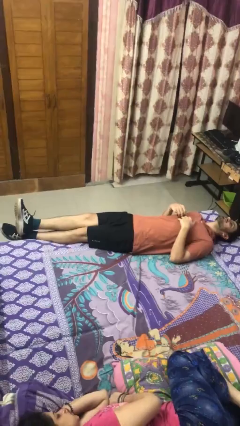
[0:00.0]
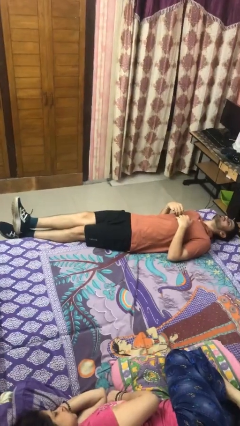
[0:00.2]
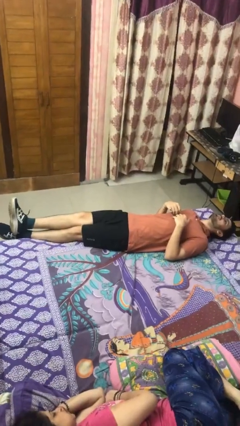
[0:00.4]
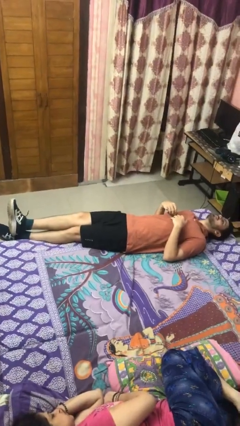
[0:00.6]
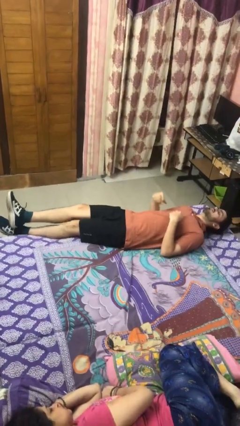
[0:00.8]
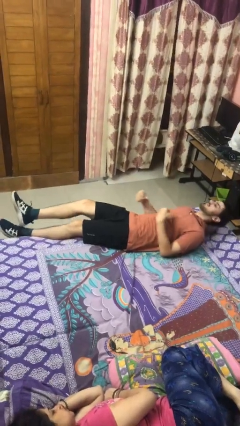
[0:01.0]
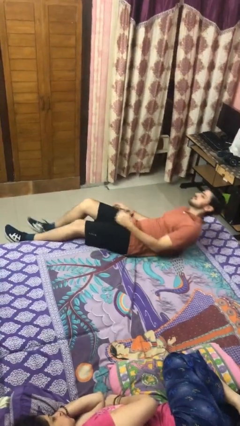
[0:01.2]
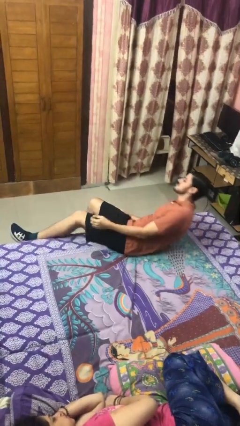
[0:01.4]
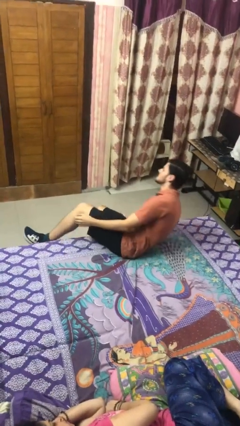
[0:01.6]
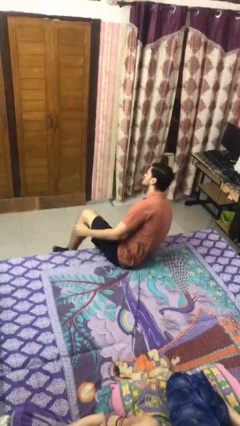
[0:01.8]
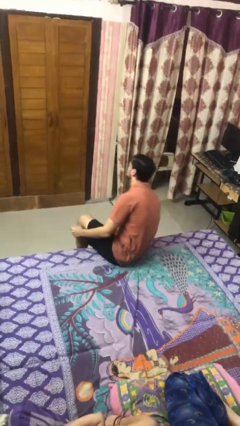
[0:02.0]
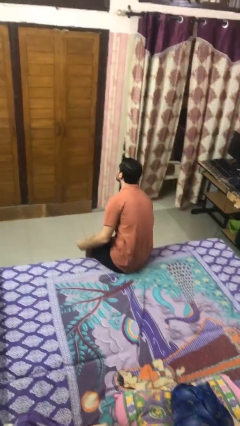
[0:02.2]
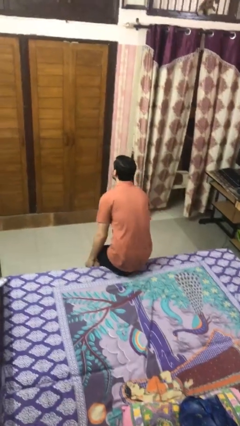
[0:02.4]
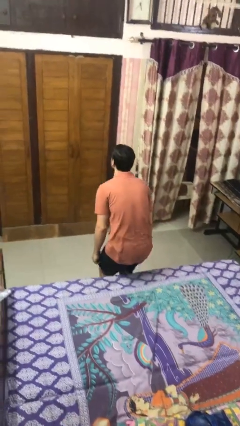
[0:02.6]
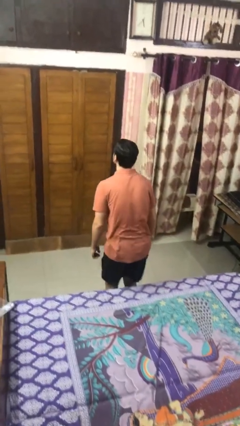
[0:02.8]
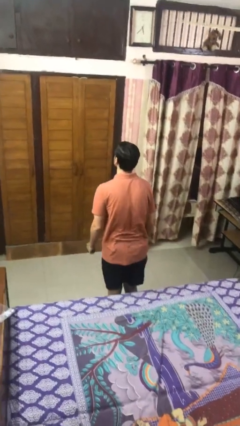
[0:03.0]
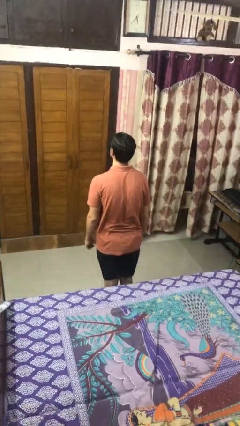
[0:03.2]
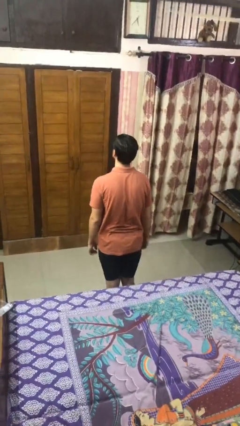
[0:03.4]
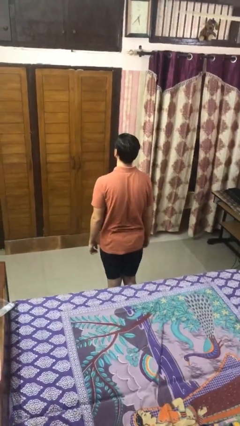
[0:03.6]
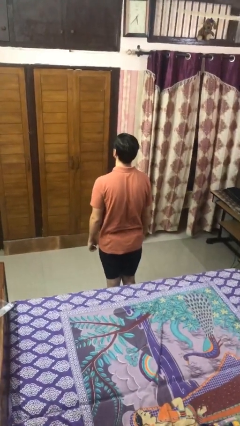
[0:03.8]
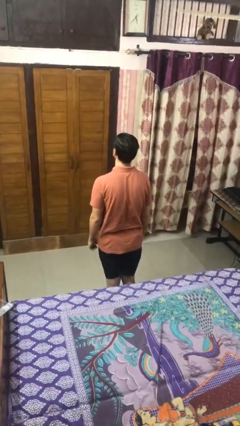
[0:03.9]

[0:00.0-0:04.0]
person stands up

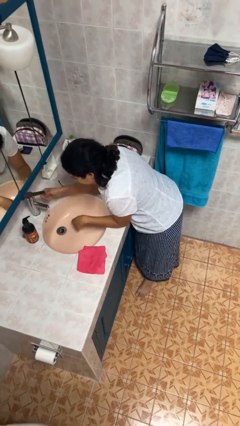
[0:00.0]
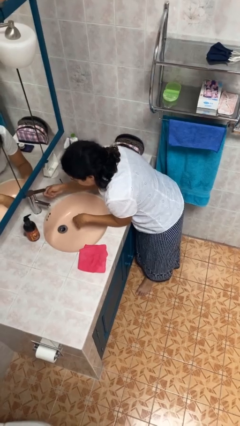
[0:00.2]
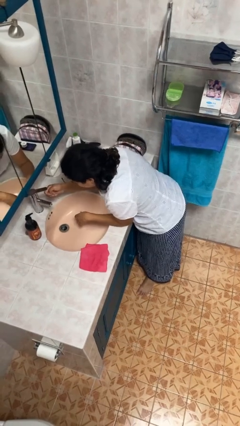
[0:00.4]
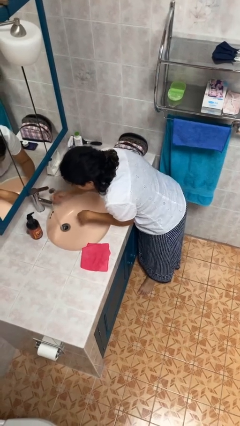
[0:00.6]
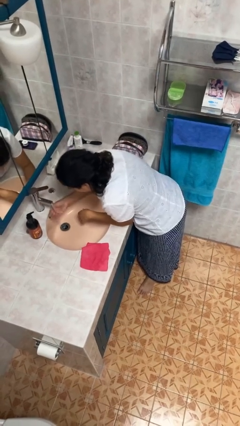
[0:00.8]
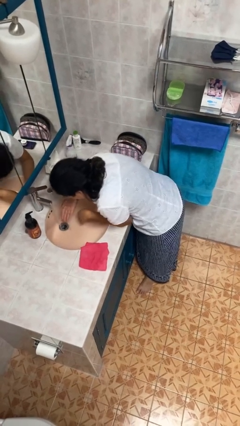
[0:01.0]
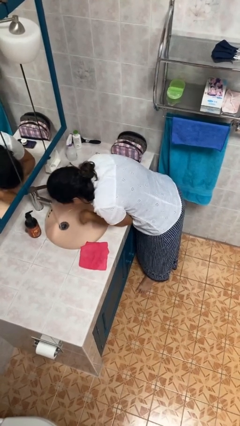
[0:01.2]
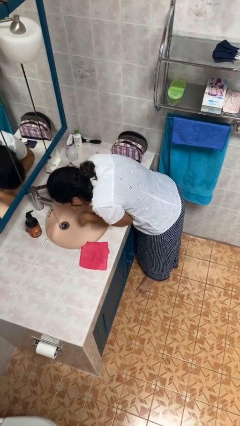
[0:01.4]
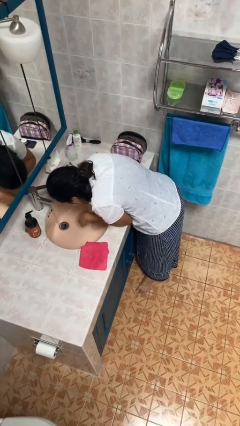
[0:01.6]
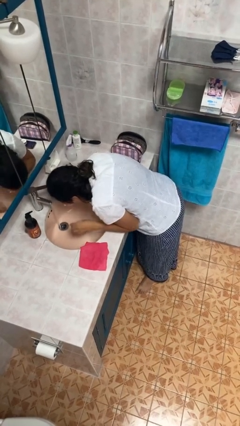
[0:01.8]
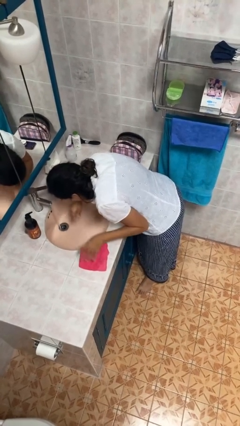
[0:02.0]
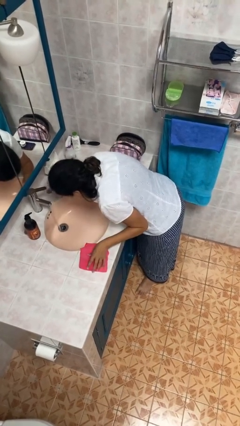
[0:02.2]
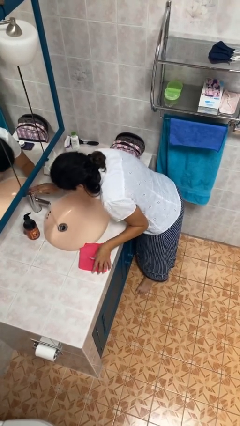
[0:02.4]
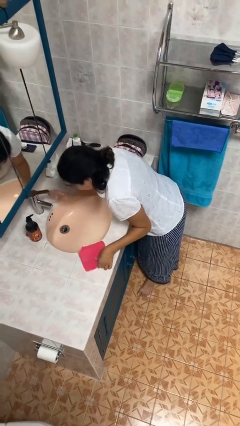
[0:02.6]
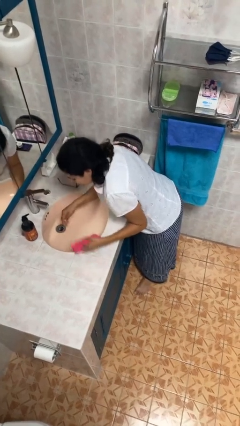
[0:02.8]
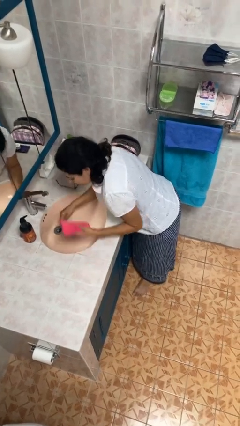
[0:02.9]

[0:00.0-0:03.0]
person washes face

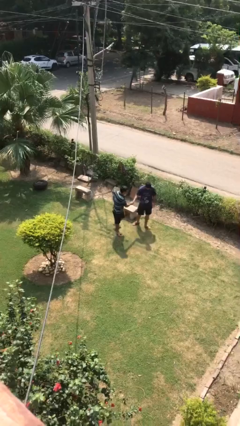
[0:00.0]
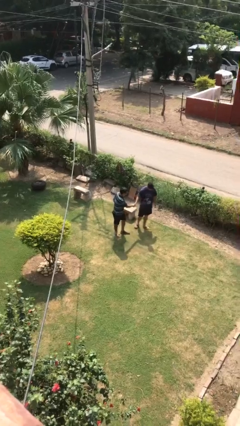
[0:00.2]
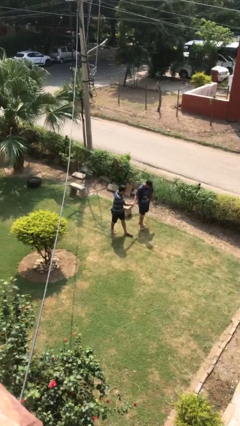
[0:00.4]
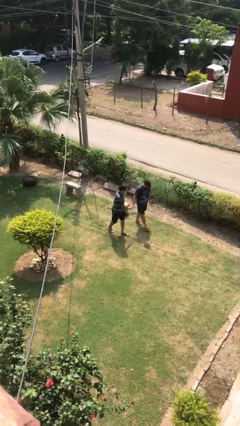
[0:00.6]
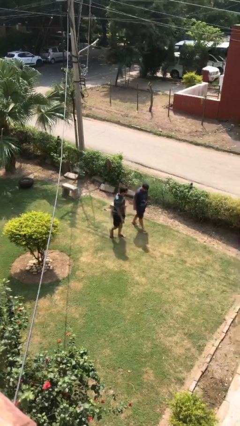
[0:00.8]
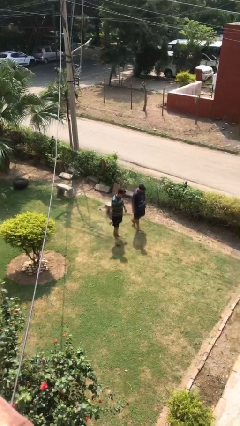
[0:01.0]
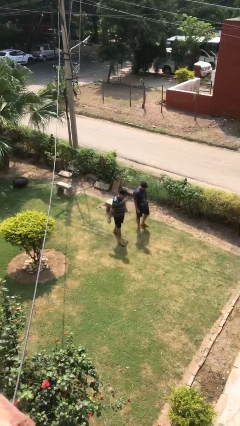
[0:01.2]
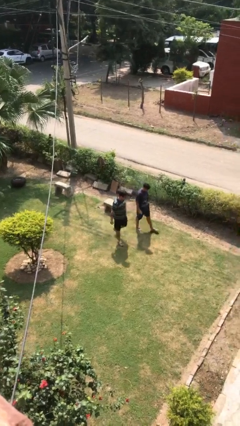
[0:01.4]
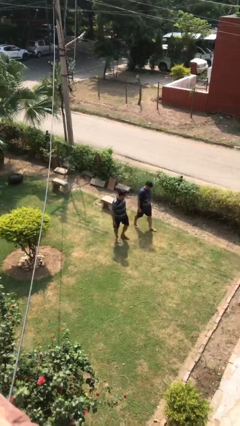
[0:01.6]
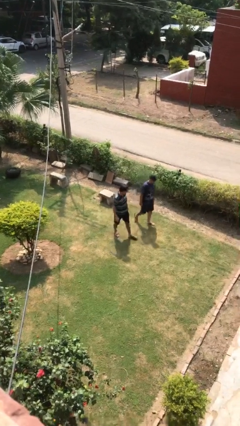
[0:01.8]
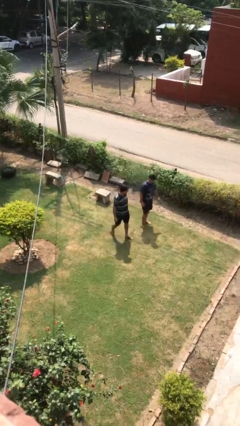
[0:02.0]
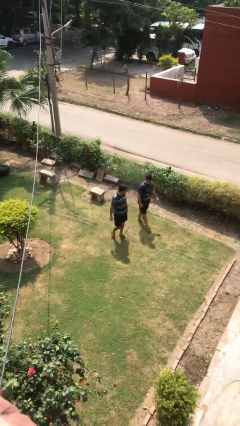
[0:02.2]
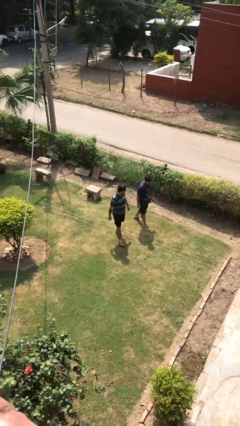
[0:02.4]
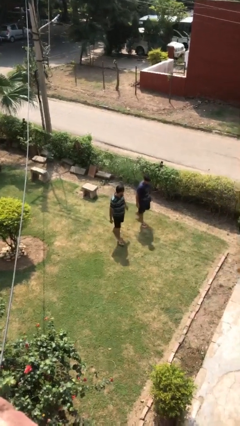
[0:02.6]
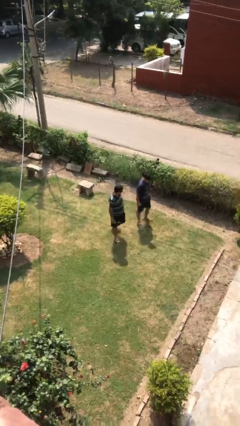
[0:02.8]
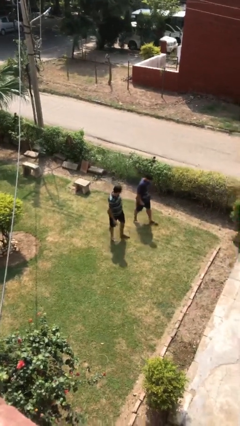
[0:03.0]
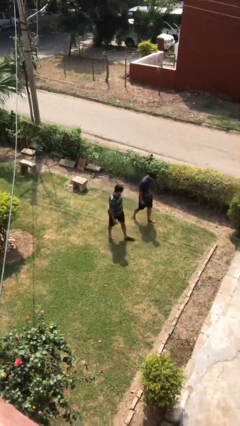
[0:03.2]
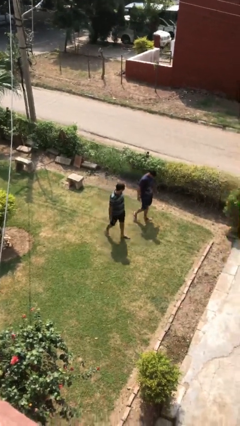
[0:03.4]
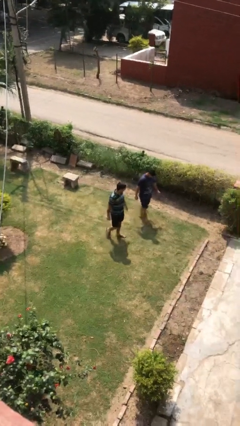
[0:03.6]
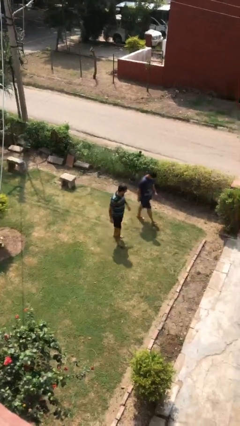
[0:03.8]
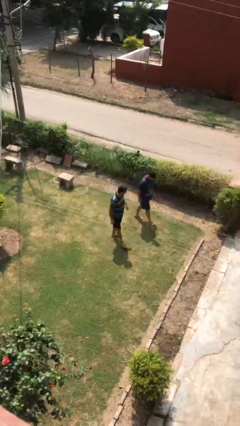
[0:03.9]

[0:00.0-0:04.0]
person talks to person

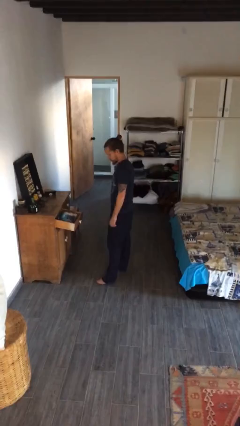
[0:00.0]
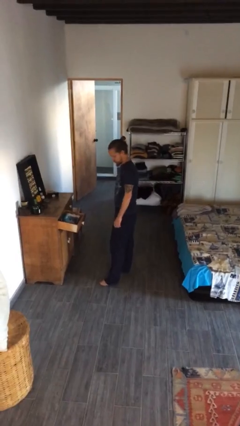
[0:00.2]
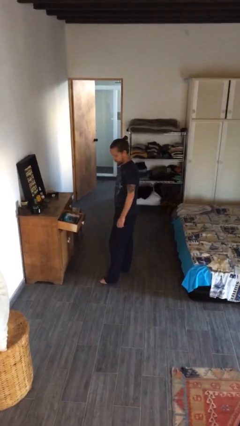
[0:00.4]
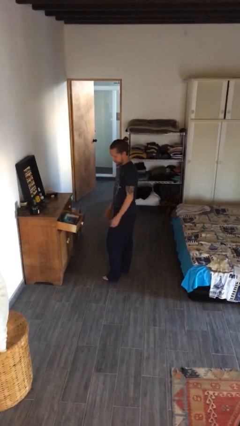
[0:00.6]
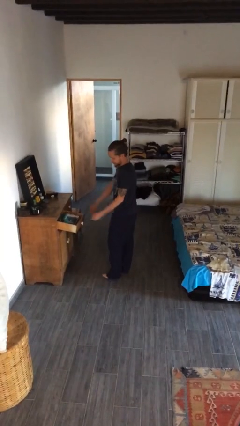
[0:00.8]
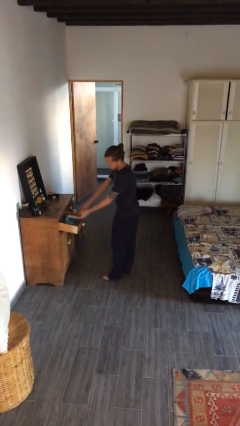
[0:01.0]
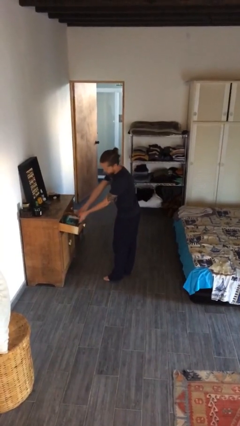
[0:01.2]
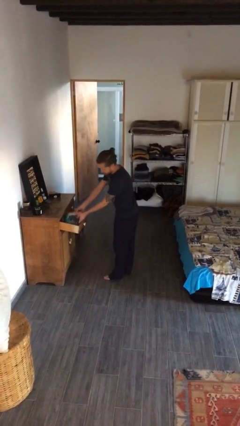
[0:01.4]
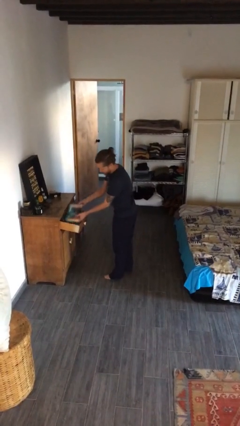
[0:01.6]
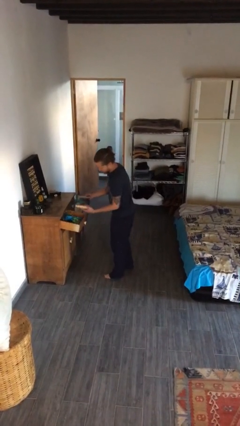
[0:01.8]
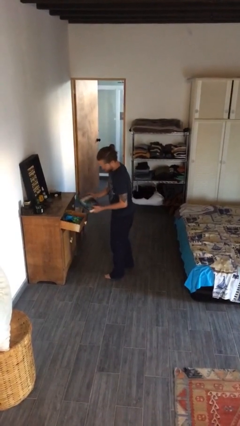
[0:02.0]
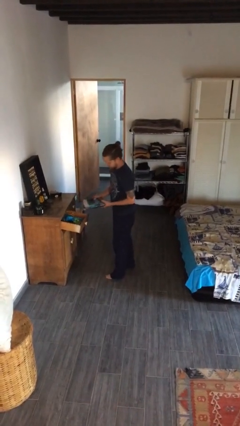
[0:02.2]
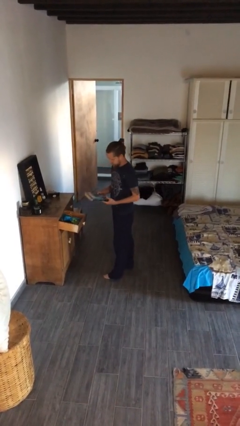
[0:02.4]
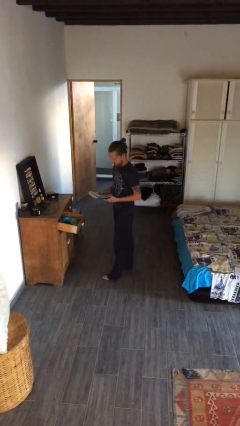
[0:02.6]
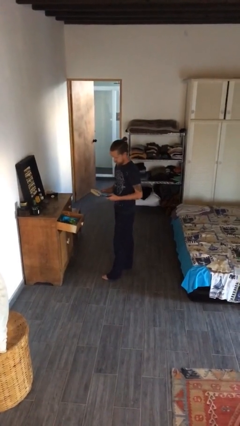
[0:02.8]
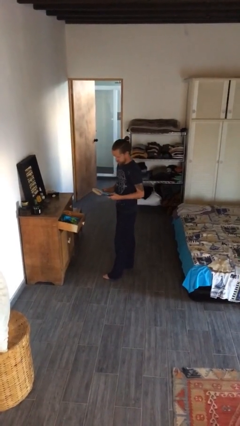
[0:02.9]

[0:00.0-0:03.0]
person picks up object from cabinet

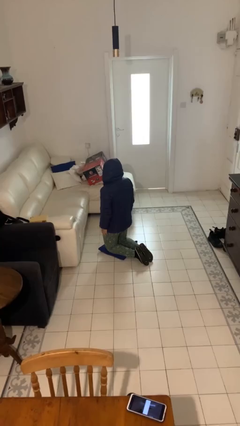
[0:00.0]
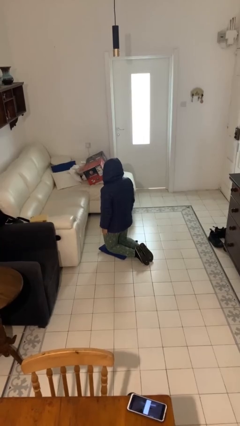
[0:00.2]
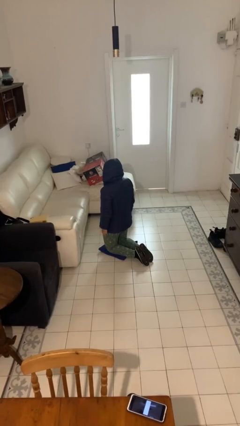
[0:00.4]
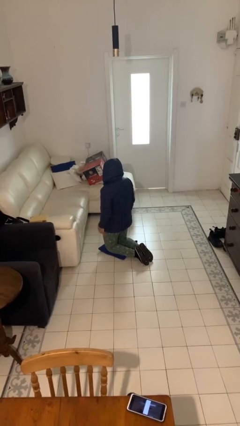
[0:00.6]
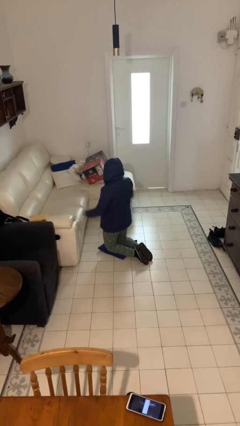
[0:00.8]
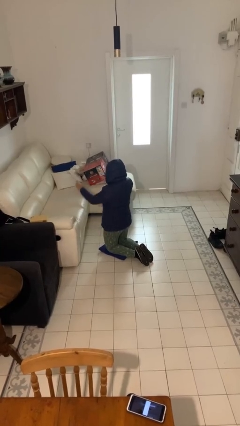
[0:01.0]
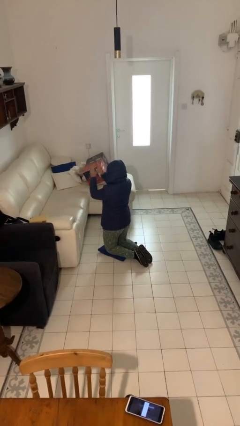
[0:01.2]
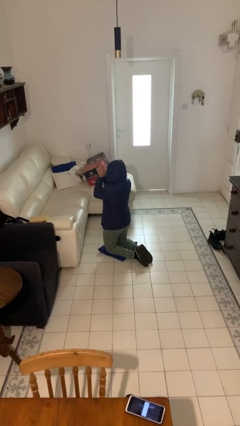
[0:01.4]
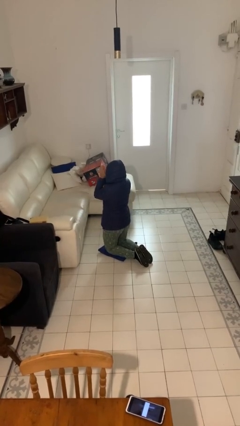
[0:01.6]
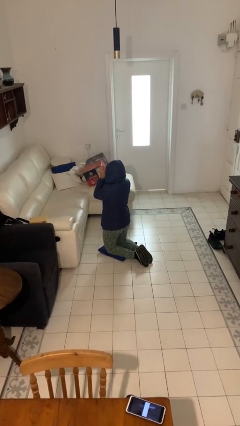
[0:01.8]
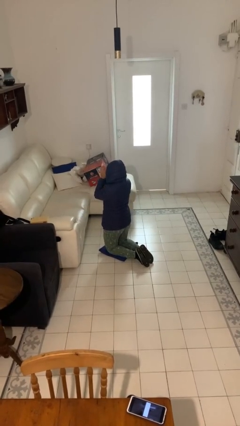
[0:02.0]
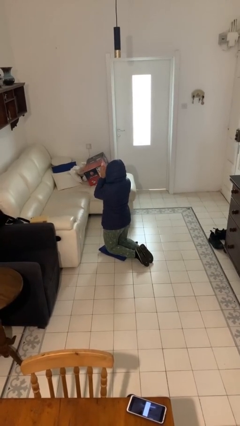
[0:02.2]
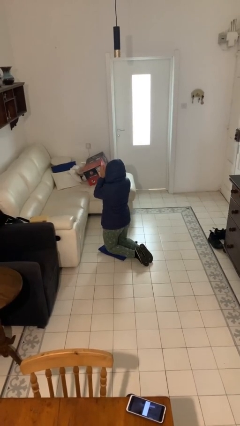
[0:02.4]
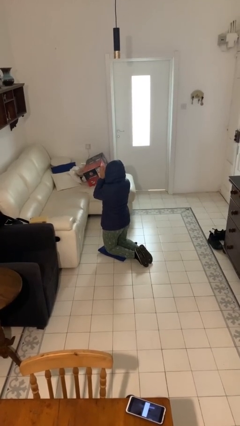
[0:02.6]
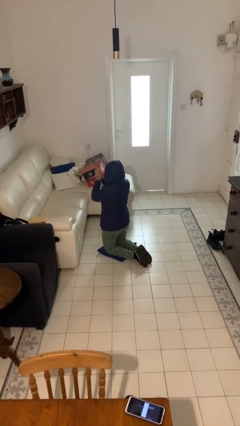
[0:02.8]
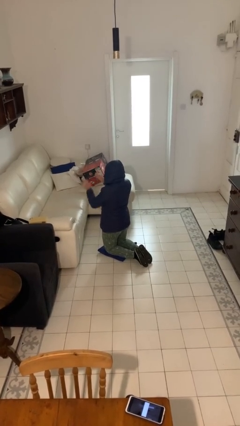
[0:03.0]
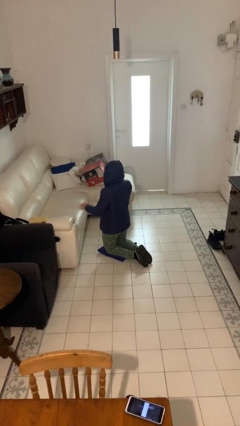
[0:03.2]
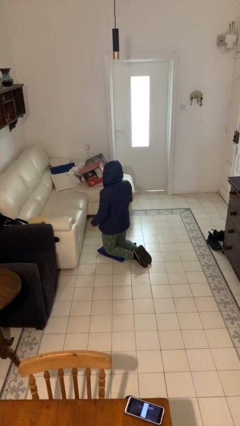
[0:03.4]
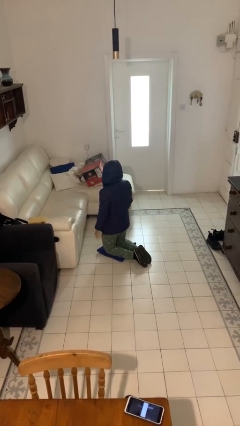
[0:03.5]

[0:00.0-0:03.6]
person prays
